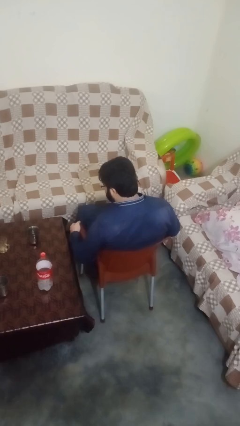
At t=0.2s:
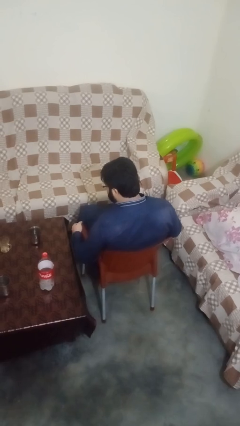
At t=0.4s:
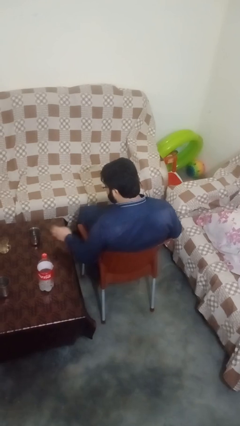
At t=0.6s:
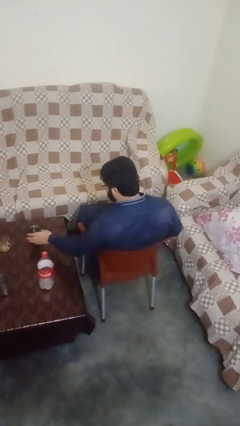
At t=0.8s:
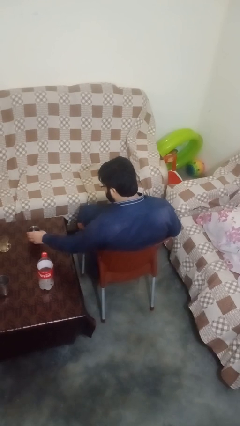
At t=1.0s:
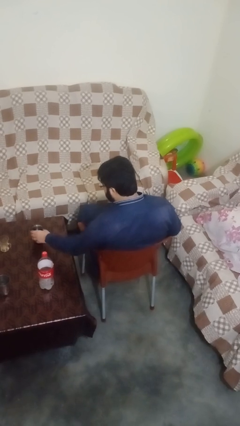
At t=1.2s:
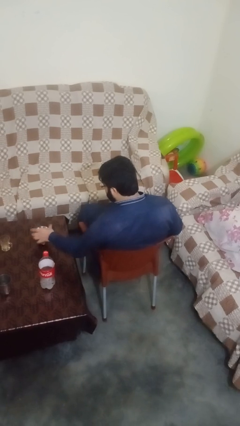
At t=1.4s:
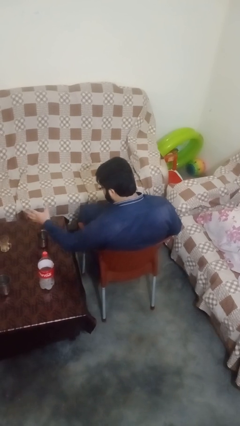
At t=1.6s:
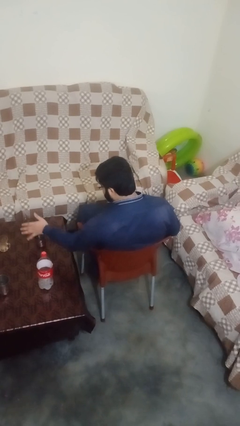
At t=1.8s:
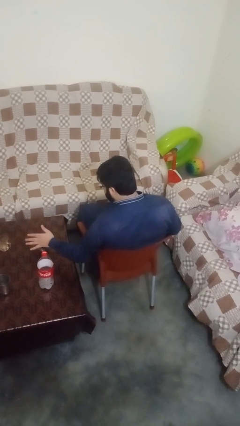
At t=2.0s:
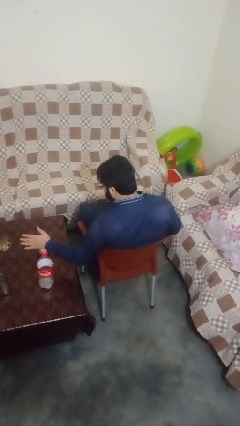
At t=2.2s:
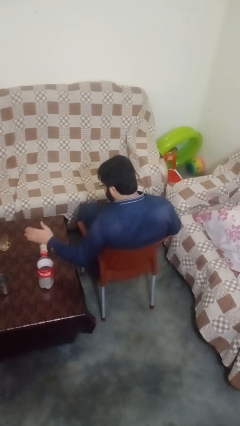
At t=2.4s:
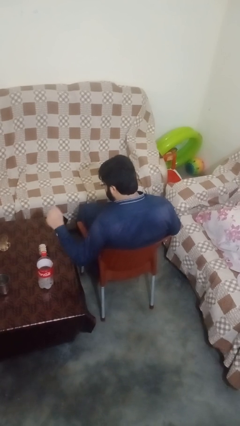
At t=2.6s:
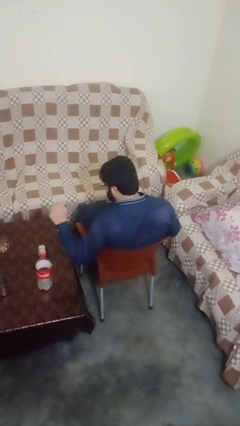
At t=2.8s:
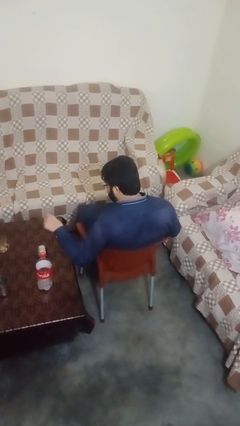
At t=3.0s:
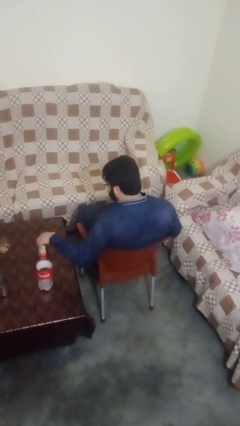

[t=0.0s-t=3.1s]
person knocks over glass

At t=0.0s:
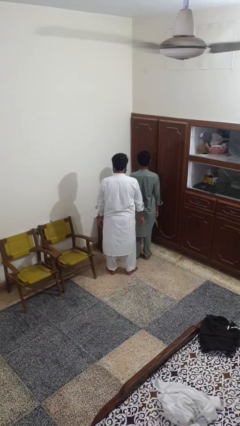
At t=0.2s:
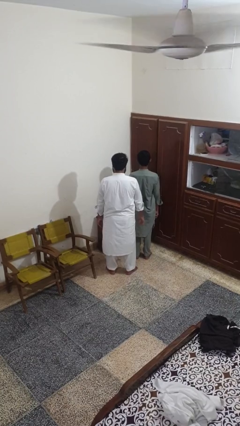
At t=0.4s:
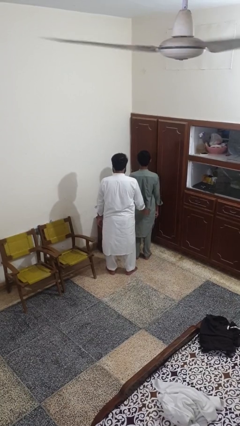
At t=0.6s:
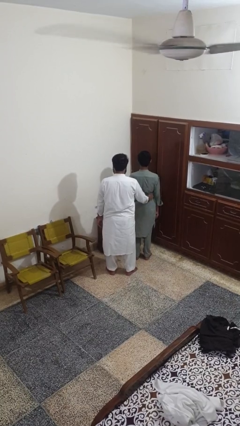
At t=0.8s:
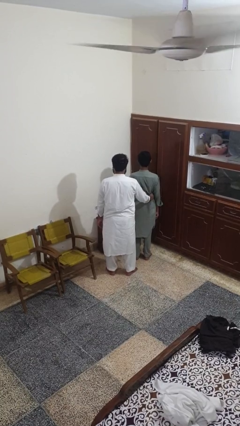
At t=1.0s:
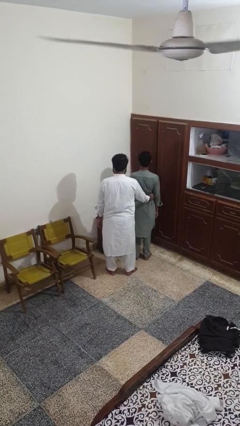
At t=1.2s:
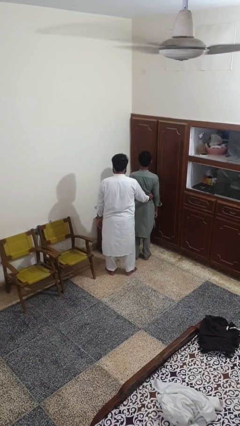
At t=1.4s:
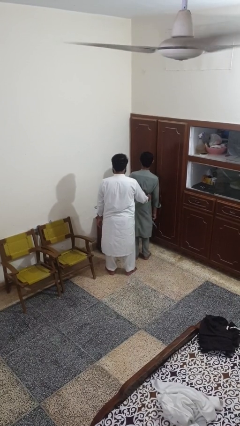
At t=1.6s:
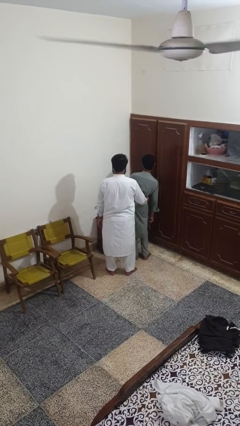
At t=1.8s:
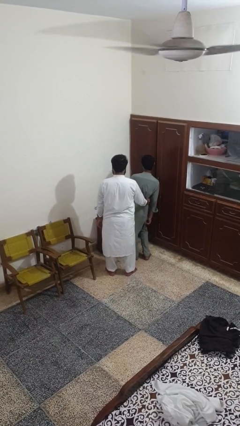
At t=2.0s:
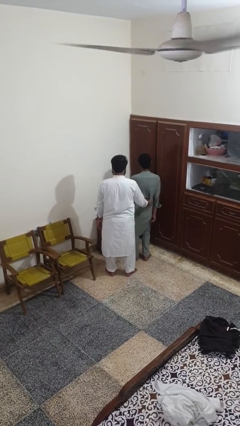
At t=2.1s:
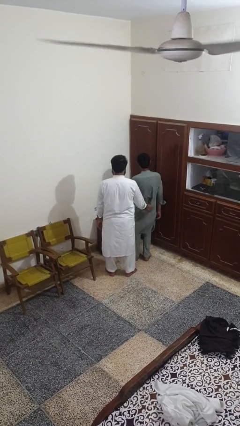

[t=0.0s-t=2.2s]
person tickles person

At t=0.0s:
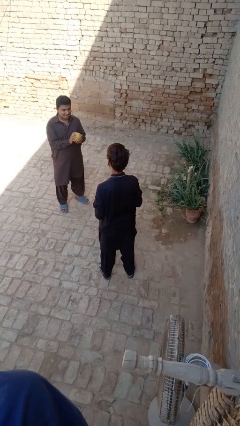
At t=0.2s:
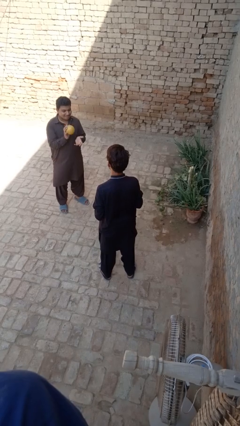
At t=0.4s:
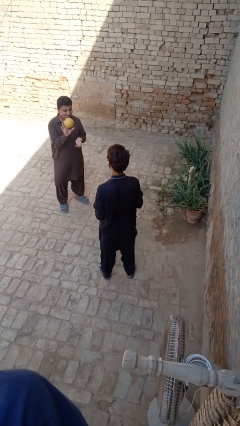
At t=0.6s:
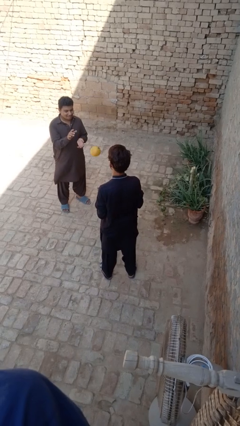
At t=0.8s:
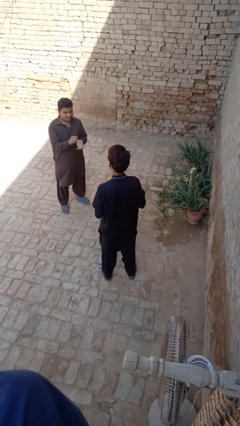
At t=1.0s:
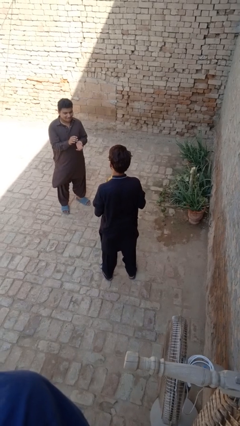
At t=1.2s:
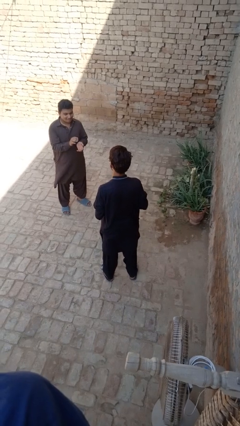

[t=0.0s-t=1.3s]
person catches object from person

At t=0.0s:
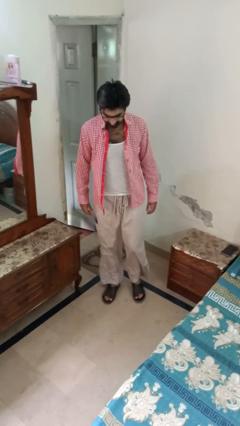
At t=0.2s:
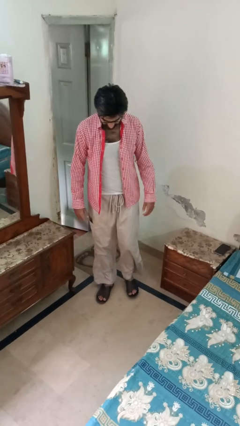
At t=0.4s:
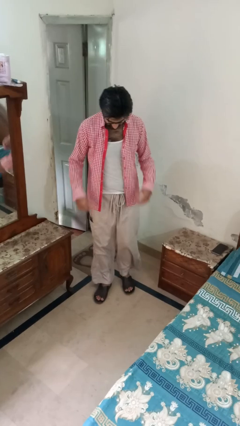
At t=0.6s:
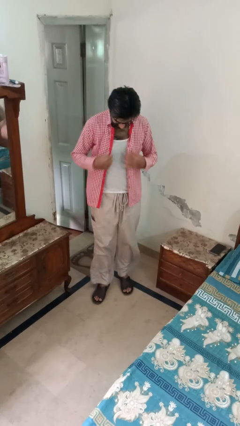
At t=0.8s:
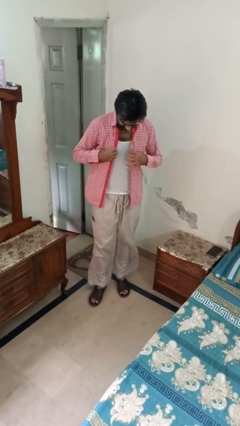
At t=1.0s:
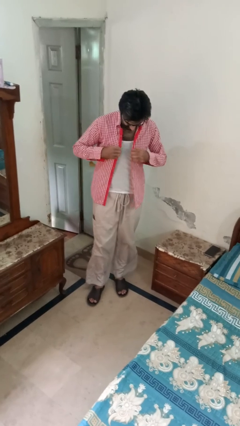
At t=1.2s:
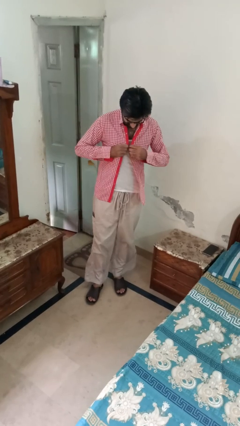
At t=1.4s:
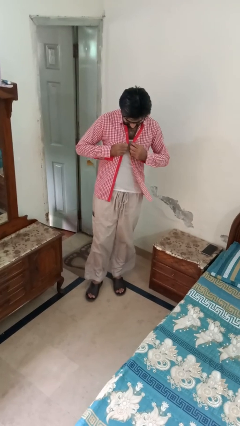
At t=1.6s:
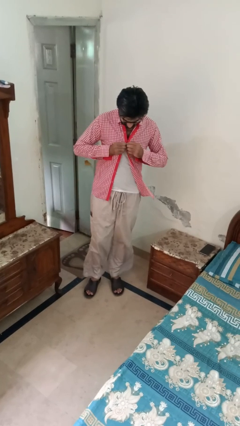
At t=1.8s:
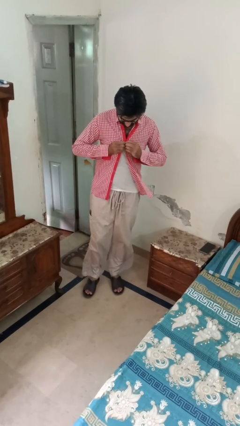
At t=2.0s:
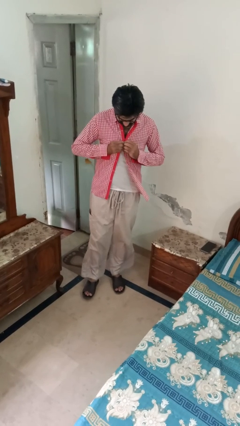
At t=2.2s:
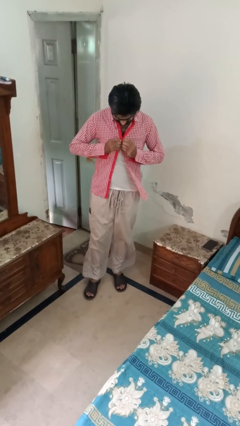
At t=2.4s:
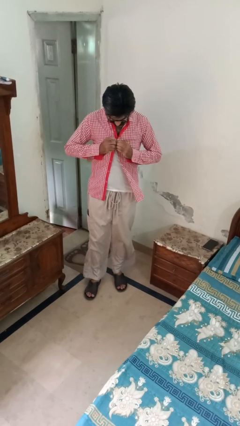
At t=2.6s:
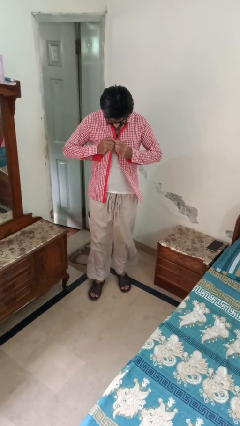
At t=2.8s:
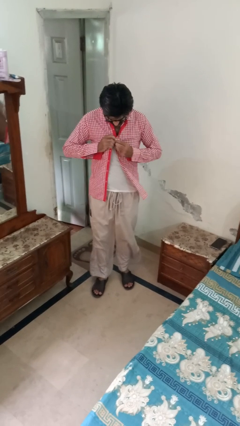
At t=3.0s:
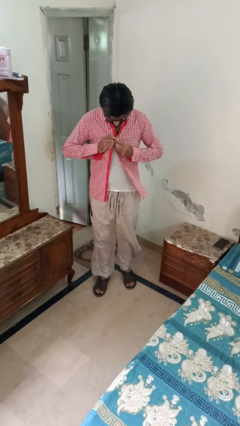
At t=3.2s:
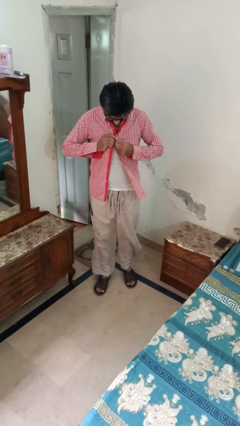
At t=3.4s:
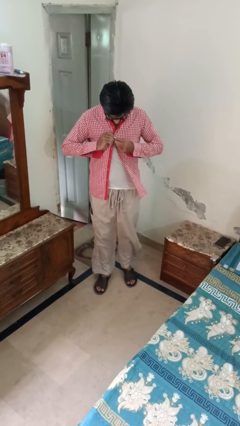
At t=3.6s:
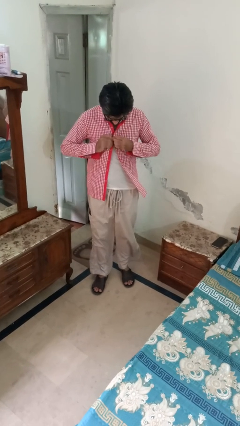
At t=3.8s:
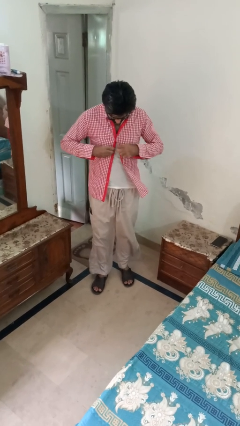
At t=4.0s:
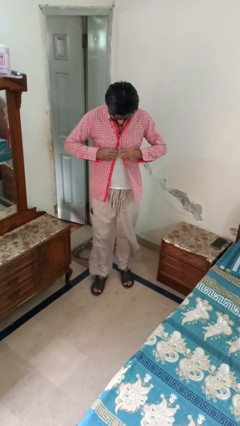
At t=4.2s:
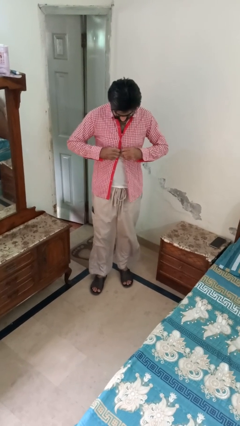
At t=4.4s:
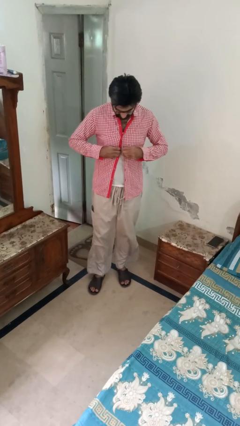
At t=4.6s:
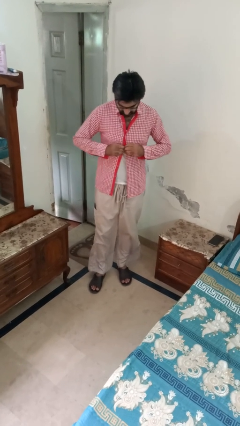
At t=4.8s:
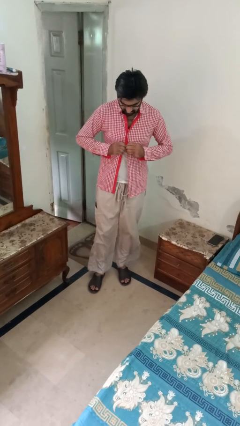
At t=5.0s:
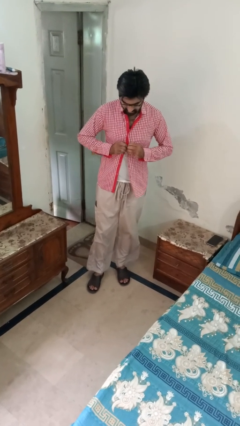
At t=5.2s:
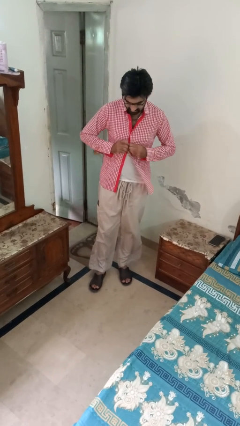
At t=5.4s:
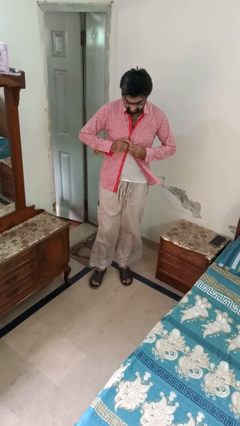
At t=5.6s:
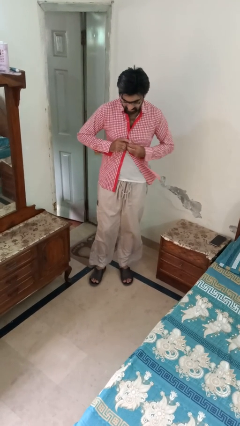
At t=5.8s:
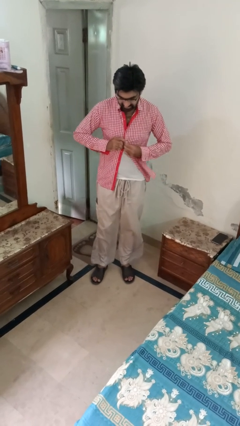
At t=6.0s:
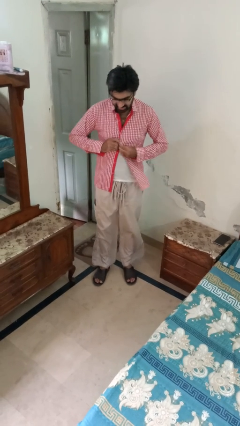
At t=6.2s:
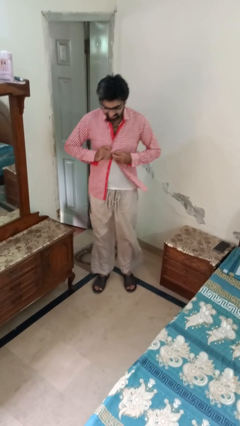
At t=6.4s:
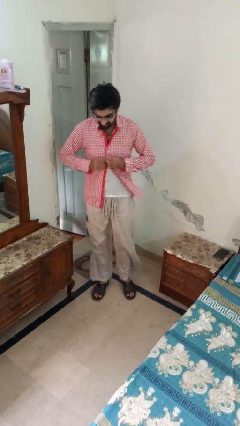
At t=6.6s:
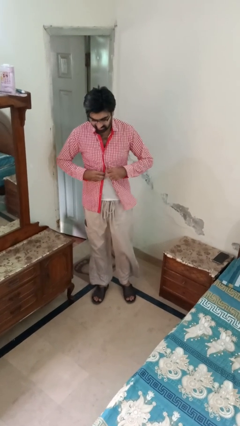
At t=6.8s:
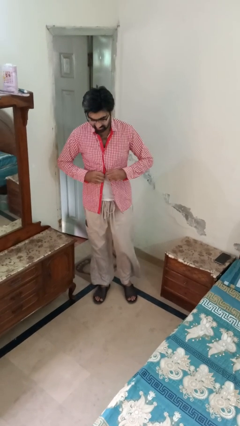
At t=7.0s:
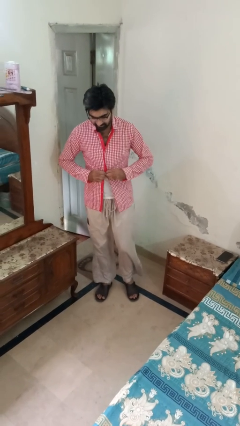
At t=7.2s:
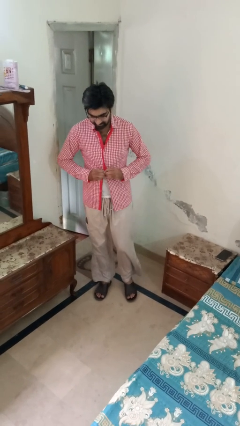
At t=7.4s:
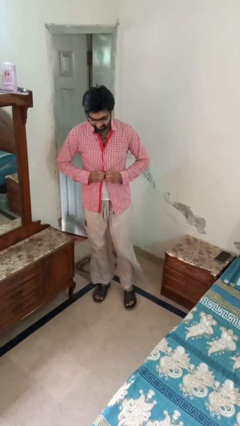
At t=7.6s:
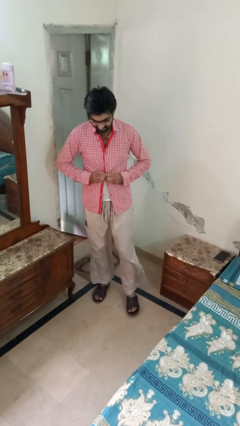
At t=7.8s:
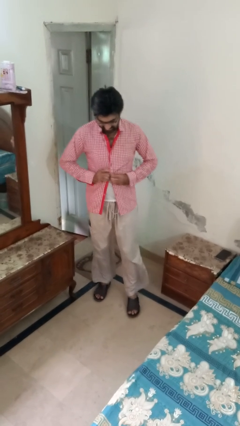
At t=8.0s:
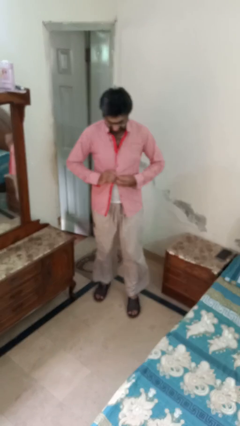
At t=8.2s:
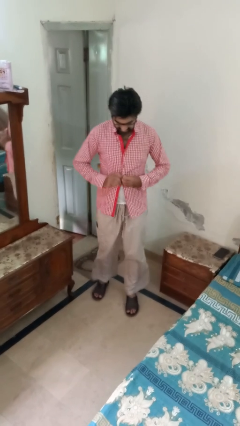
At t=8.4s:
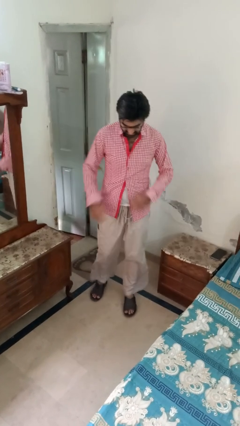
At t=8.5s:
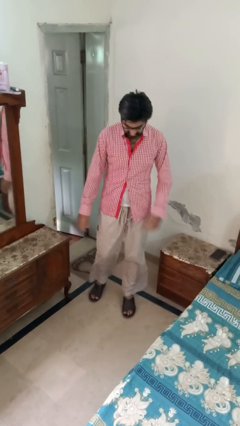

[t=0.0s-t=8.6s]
person buttons shirt

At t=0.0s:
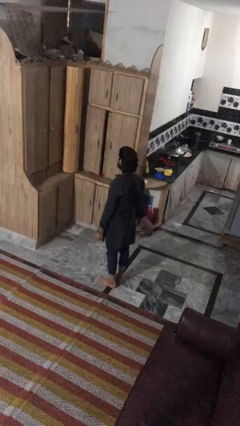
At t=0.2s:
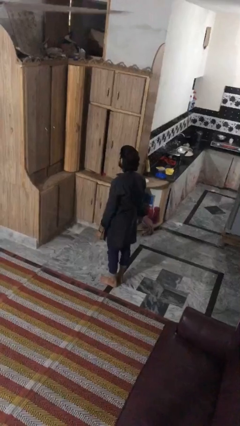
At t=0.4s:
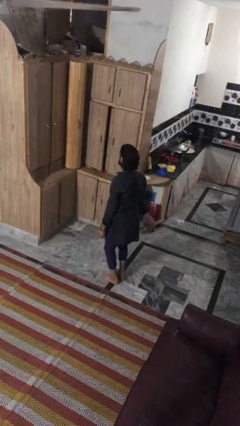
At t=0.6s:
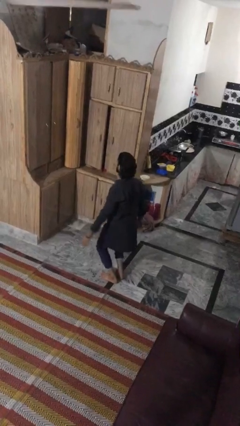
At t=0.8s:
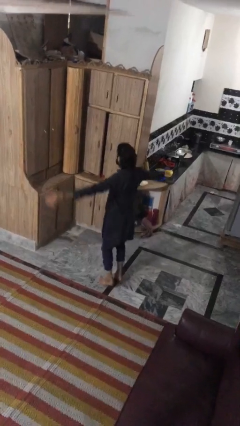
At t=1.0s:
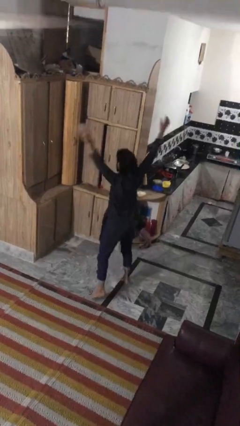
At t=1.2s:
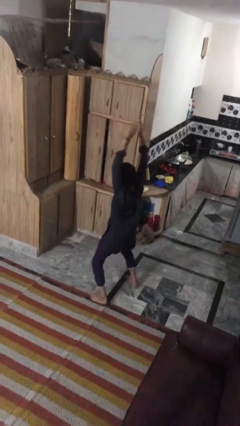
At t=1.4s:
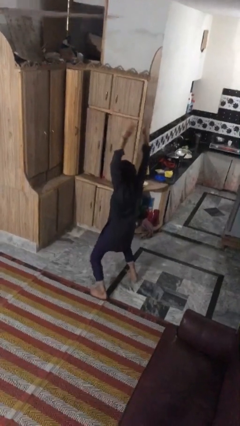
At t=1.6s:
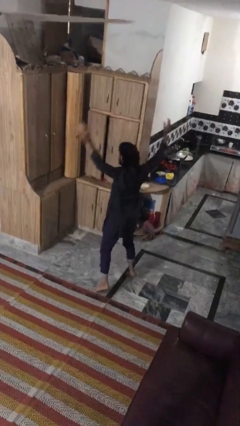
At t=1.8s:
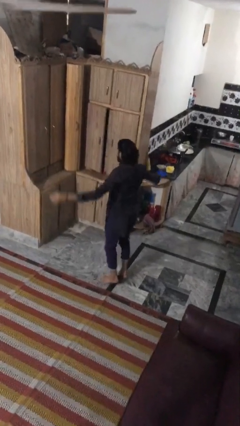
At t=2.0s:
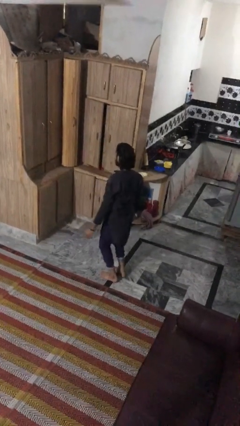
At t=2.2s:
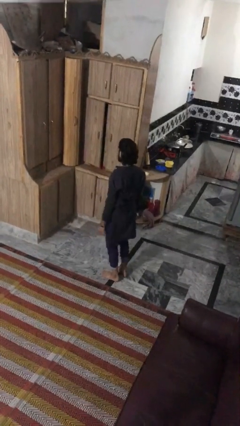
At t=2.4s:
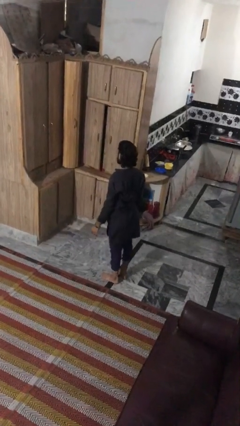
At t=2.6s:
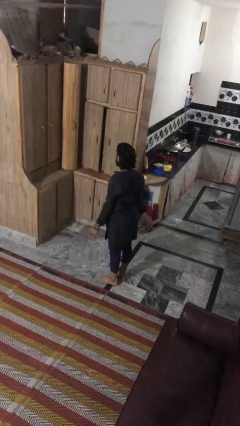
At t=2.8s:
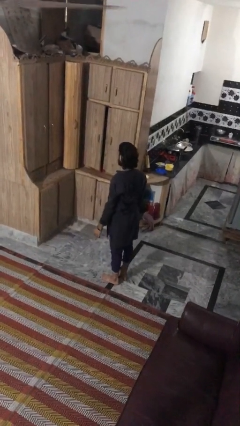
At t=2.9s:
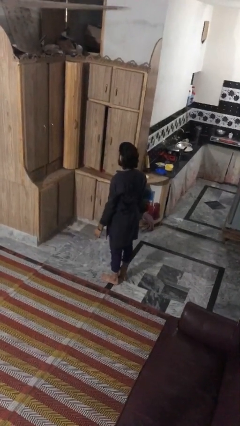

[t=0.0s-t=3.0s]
person exercises with jumping jacks
